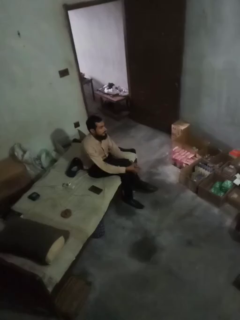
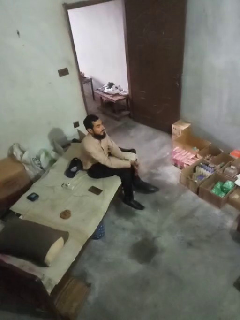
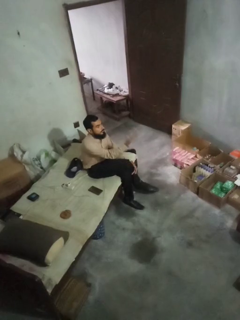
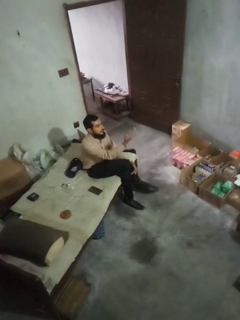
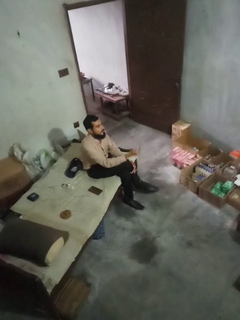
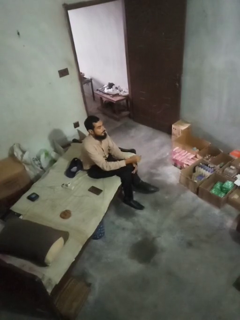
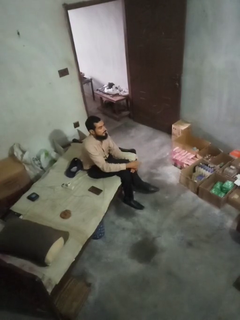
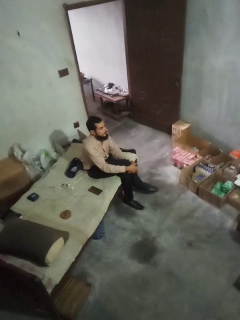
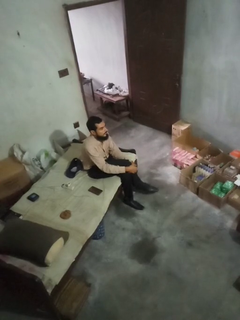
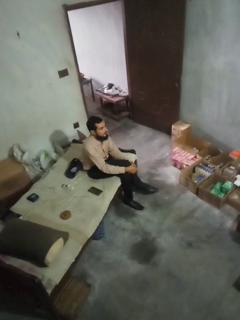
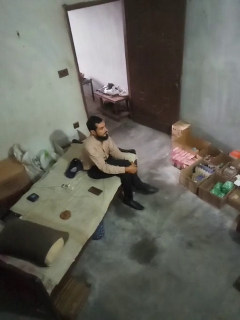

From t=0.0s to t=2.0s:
person gestures swipe up

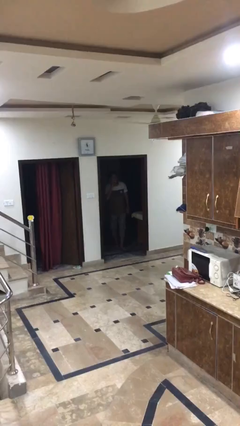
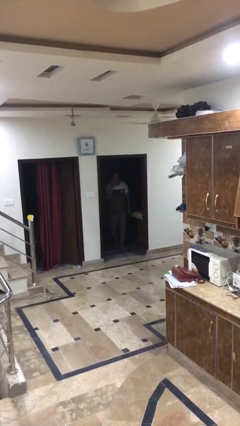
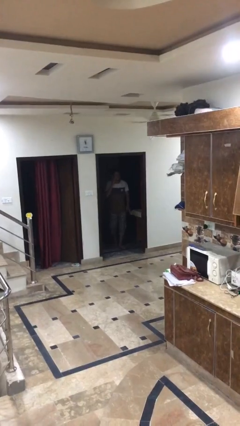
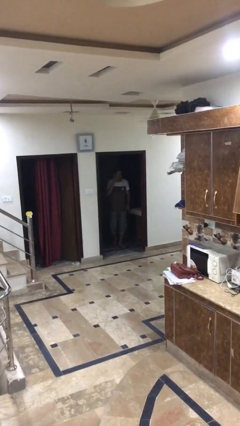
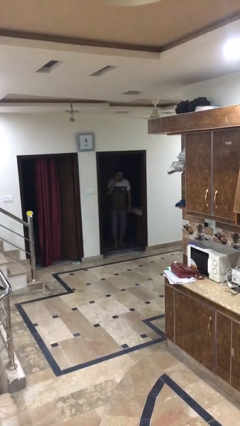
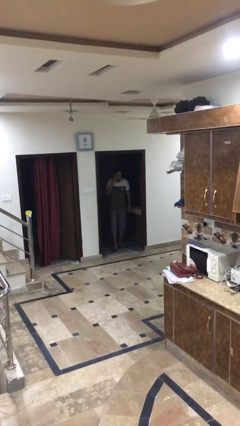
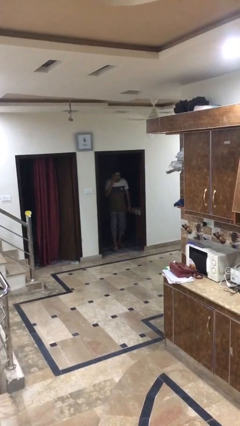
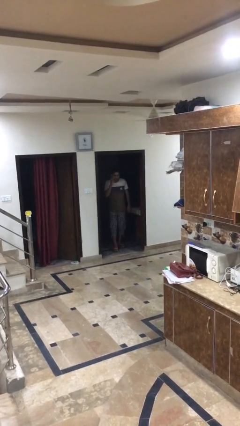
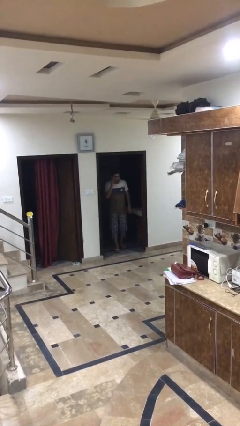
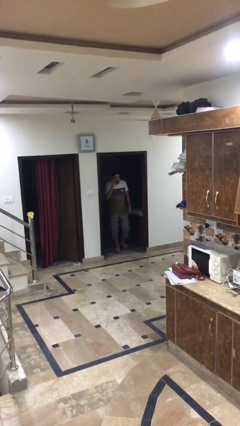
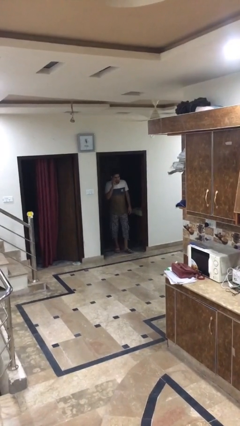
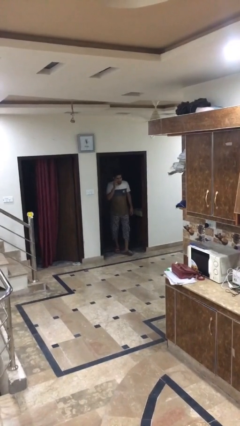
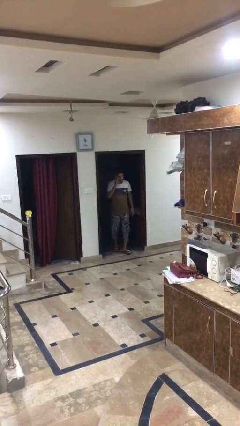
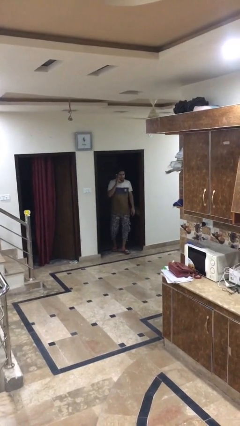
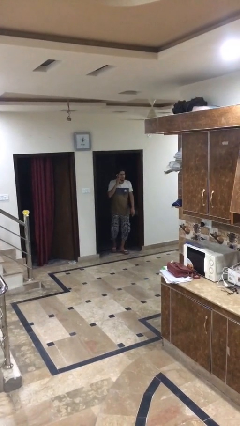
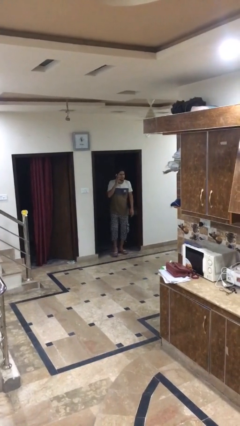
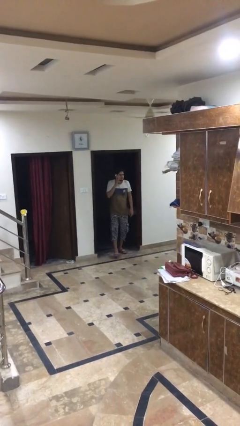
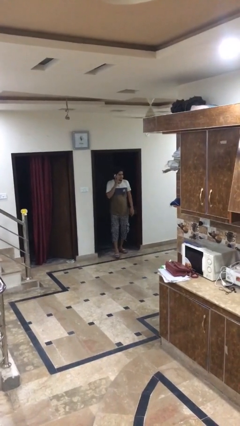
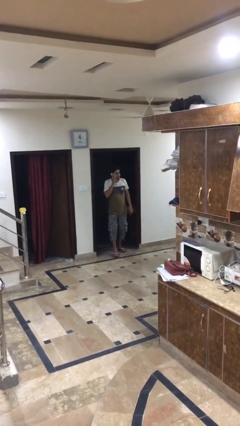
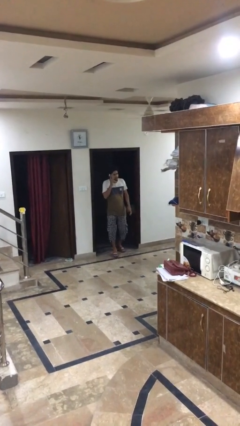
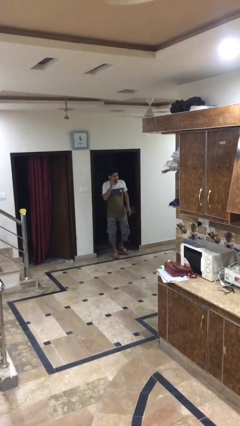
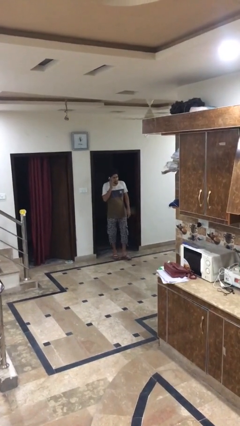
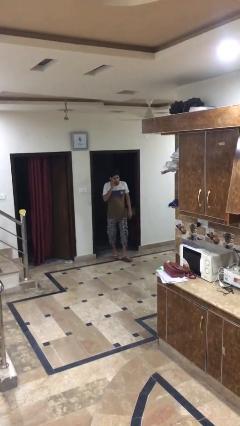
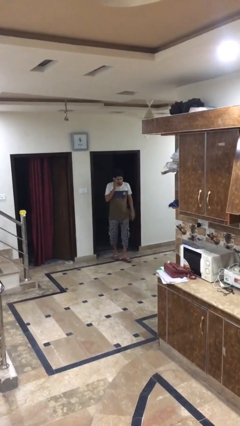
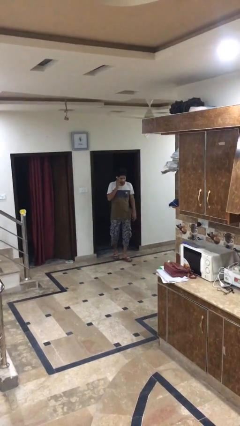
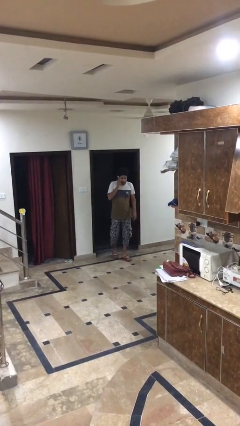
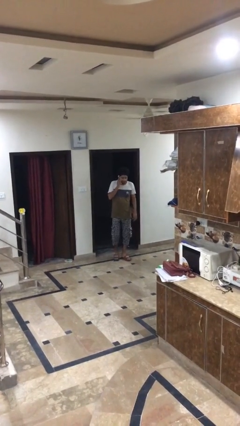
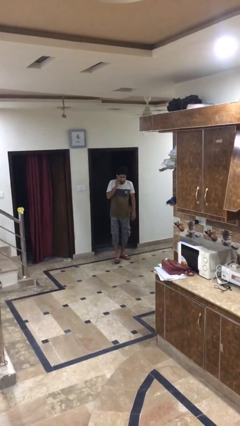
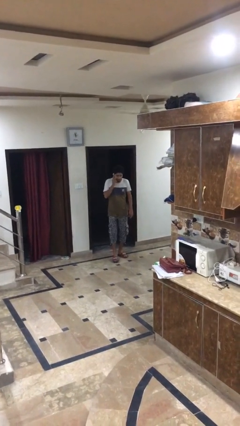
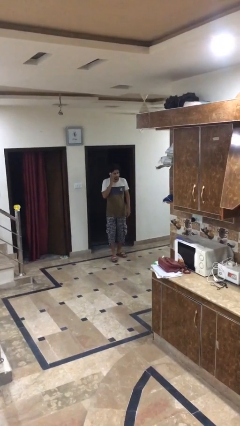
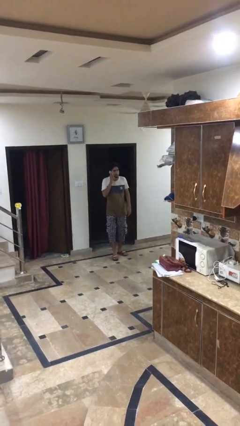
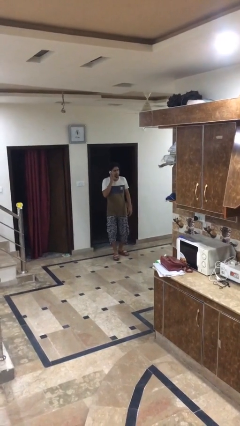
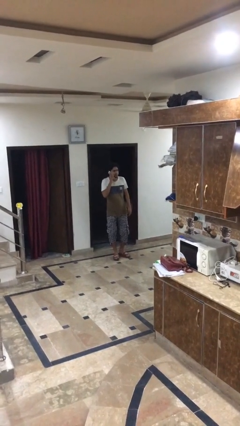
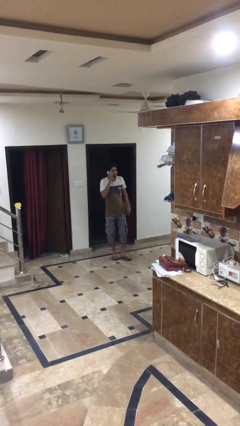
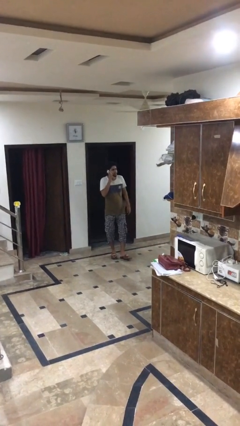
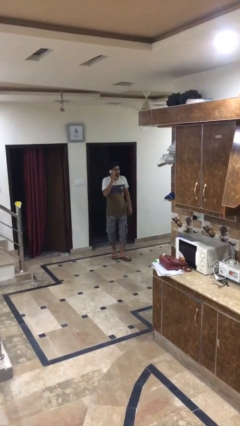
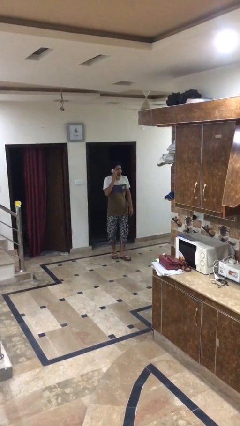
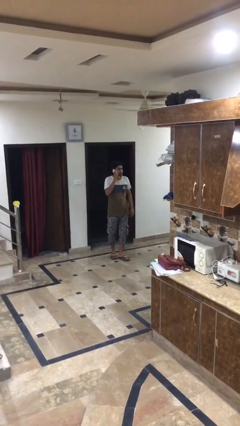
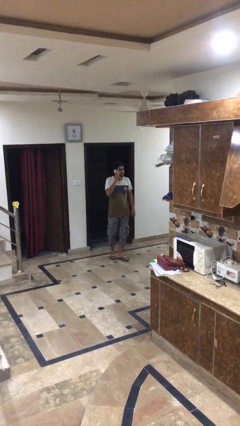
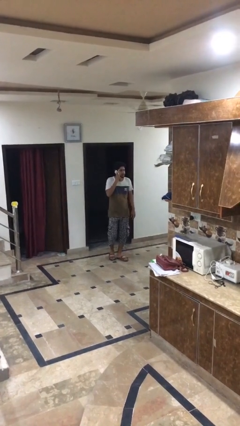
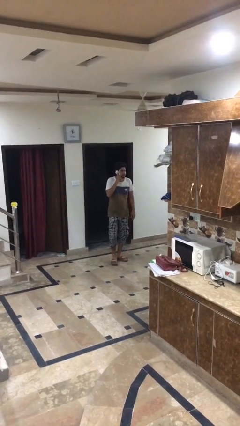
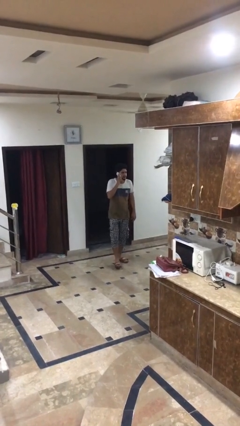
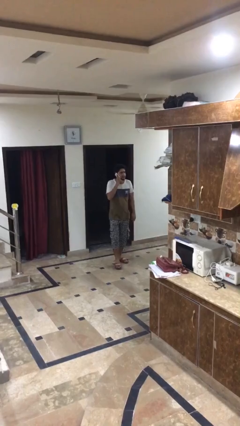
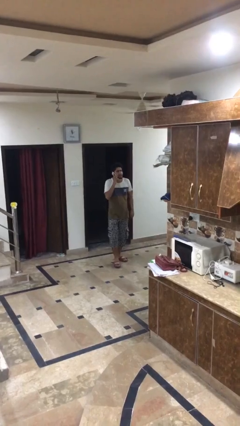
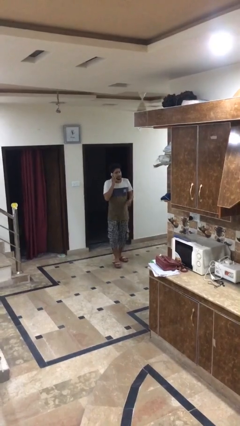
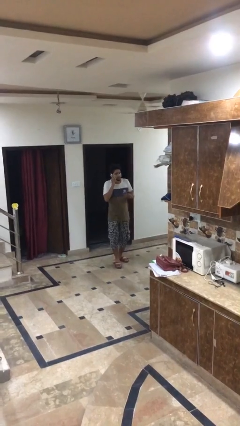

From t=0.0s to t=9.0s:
person enters scene through structure

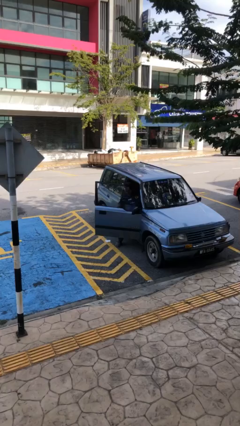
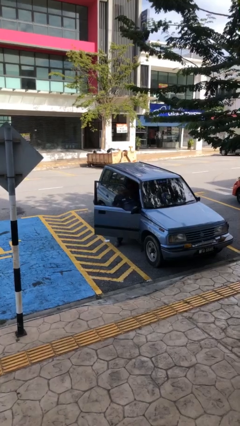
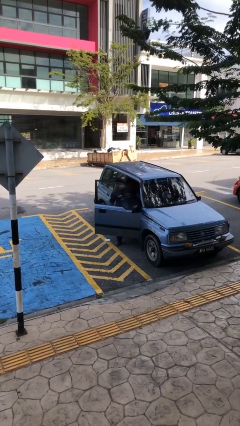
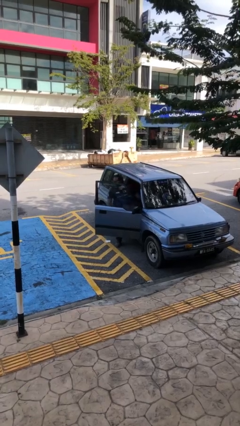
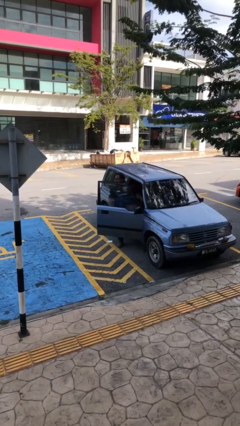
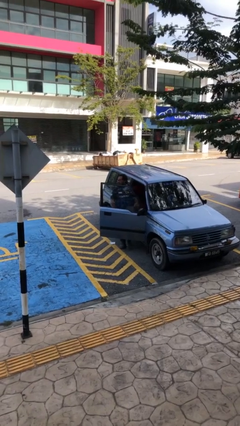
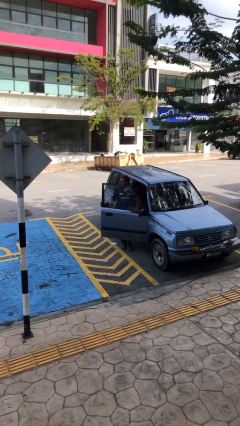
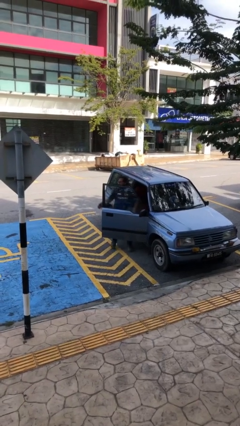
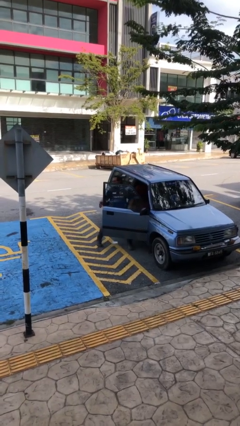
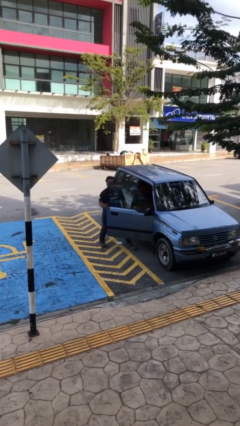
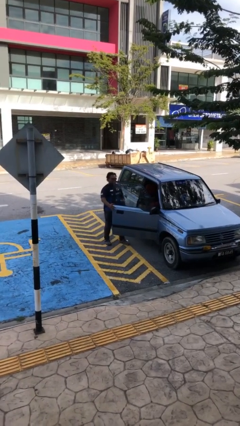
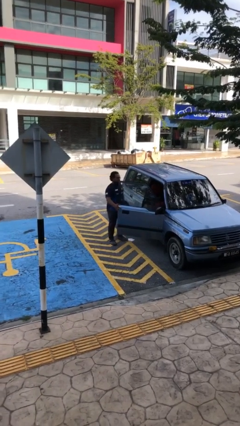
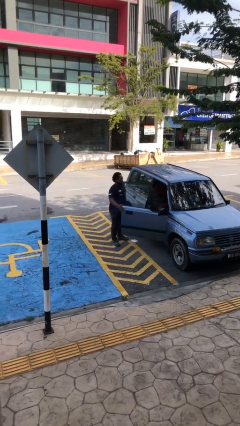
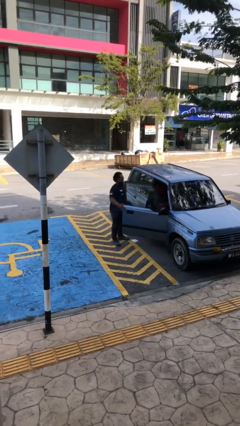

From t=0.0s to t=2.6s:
person exits car

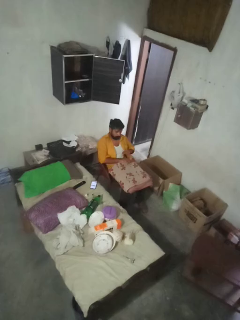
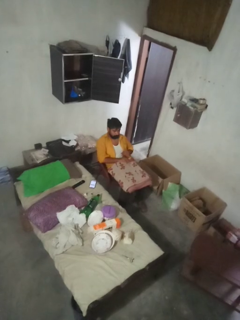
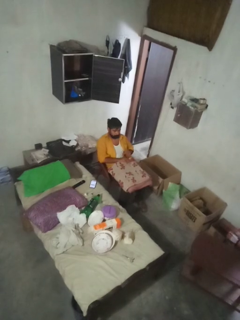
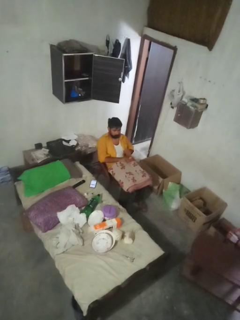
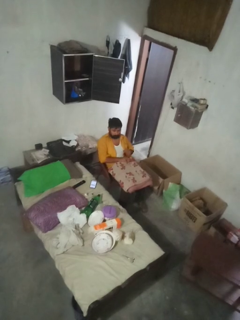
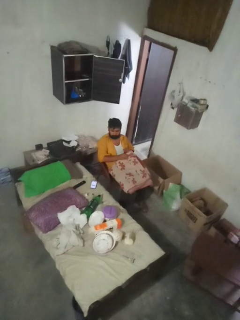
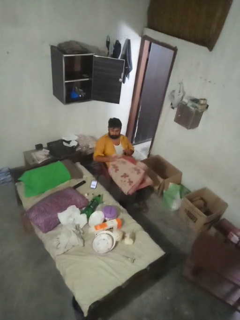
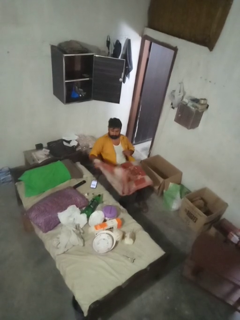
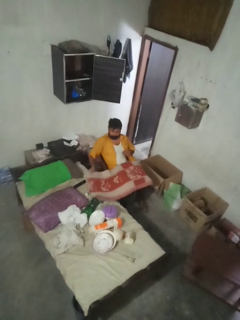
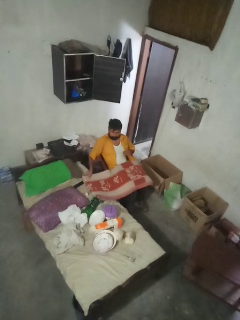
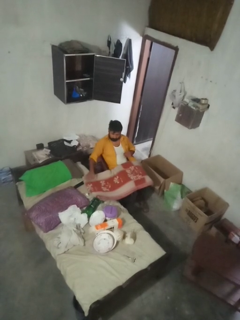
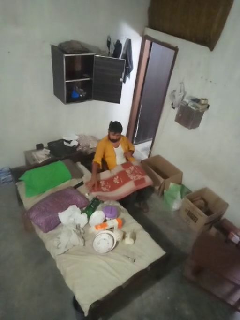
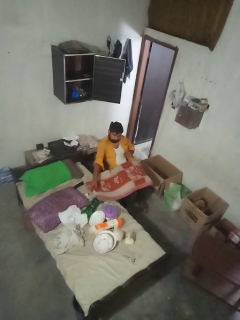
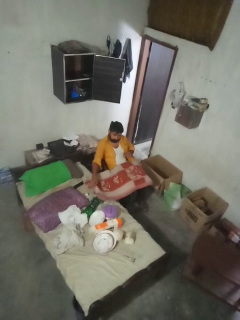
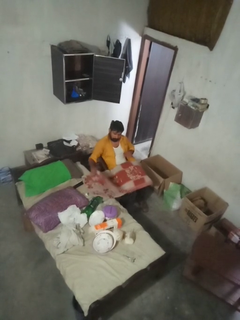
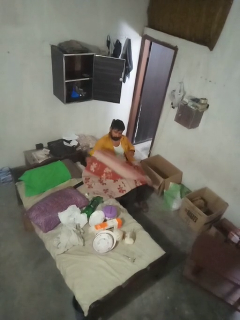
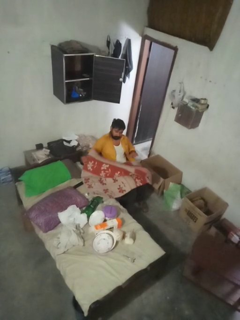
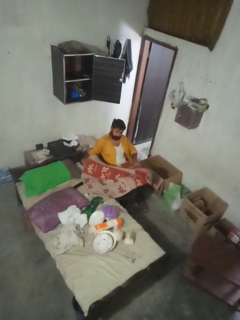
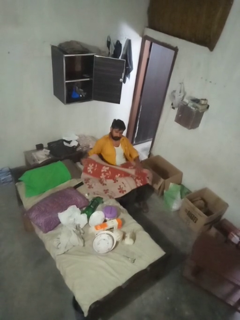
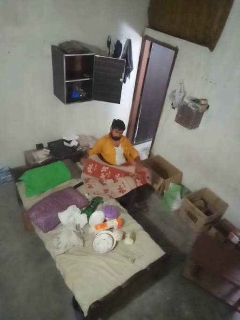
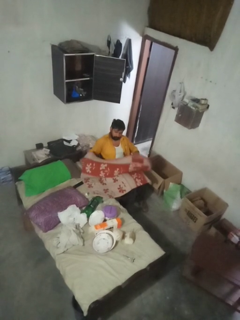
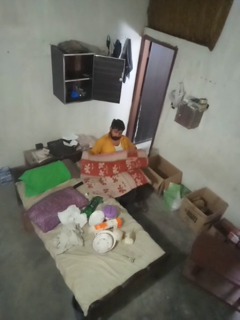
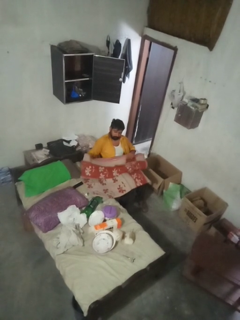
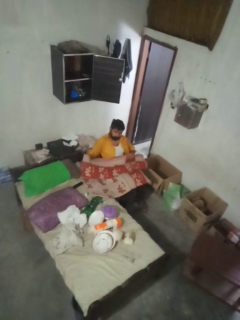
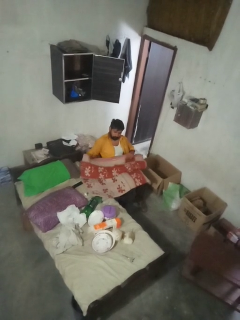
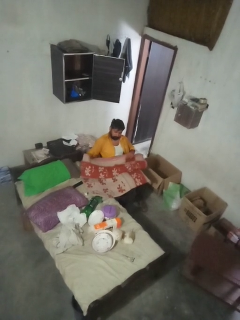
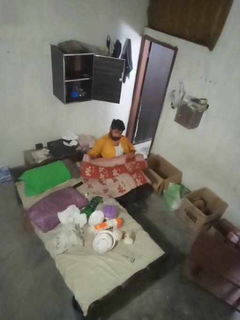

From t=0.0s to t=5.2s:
person unfolds blanket

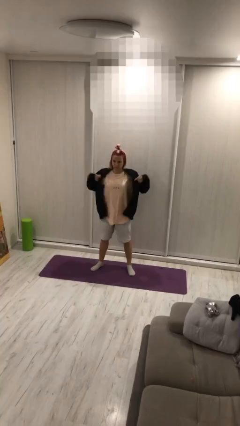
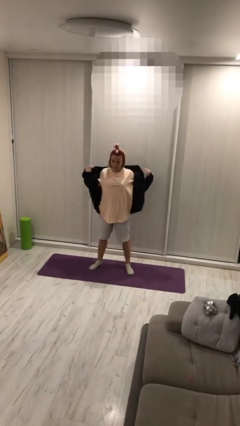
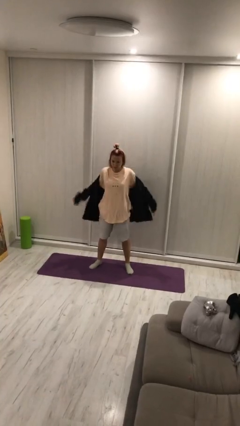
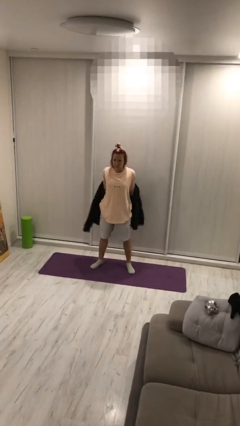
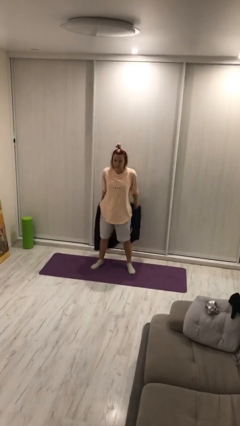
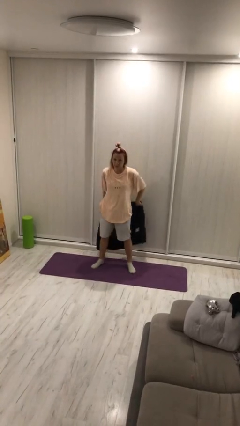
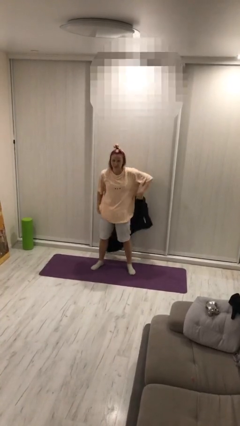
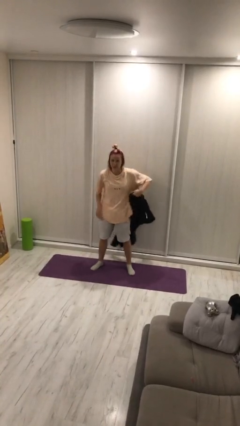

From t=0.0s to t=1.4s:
person takes off jacket
